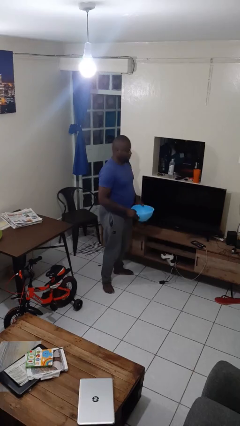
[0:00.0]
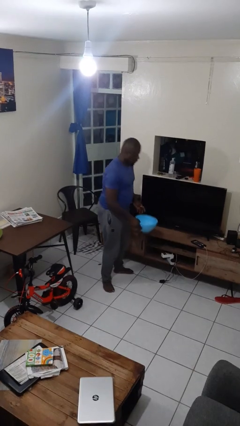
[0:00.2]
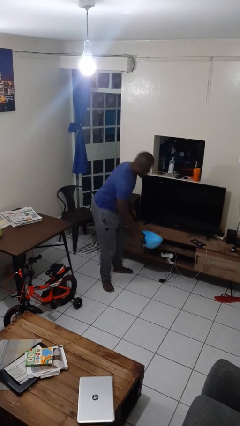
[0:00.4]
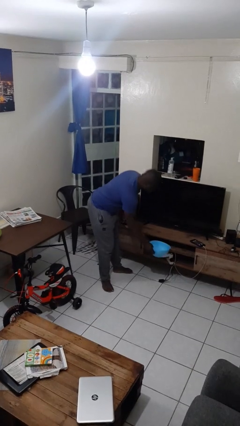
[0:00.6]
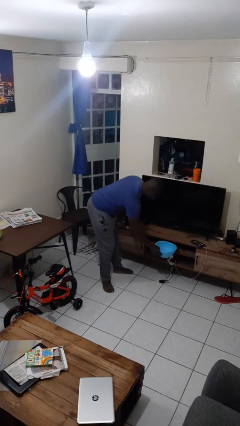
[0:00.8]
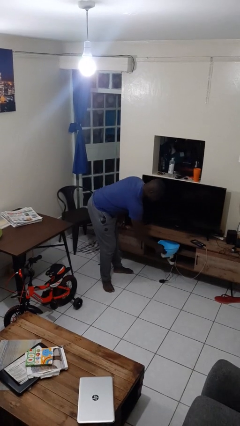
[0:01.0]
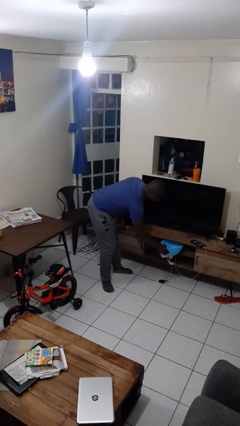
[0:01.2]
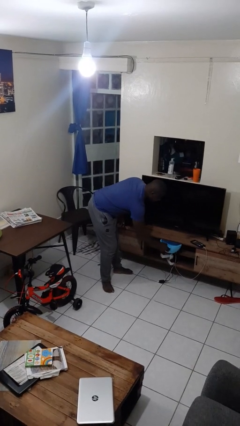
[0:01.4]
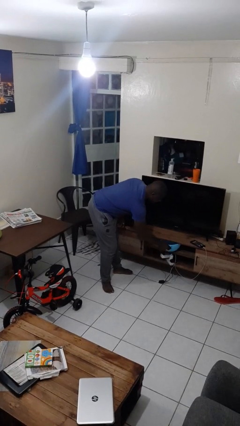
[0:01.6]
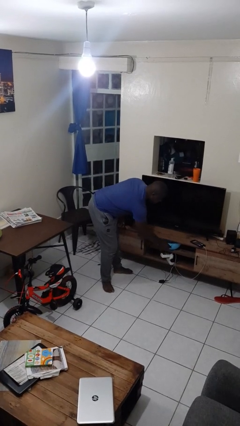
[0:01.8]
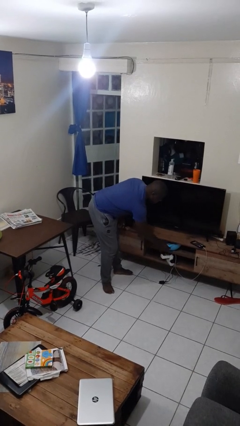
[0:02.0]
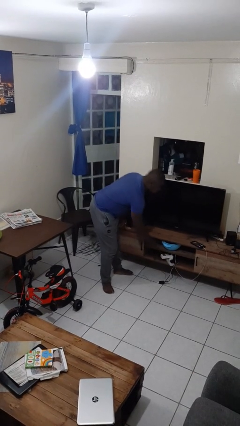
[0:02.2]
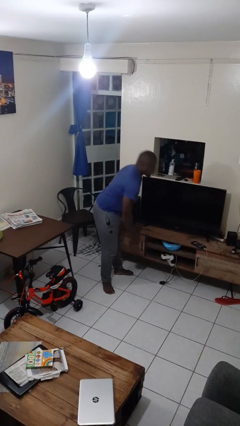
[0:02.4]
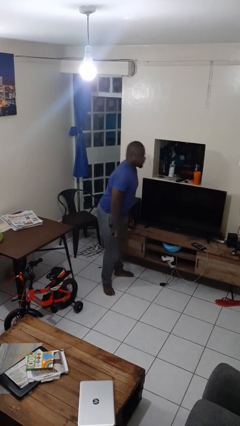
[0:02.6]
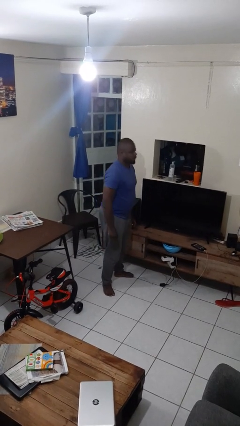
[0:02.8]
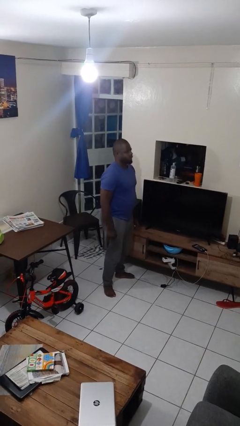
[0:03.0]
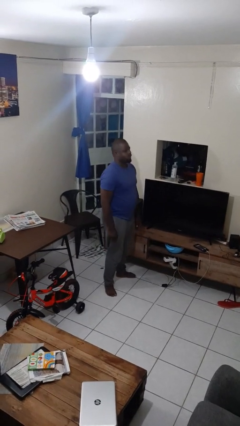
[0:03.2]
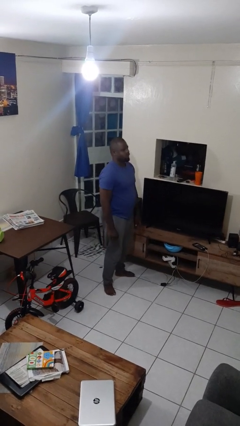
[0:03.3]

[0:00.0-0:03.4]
person puts down object into cabinet

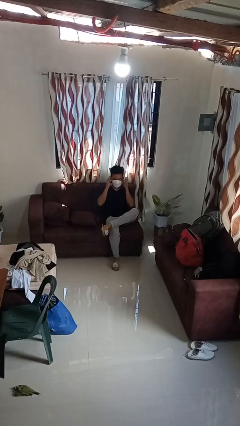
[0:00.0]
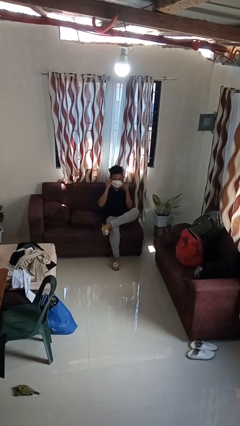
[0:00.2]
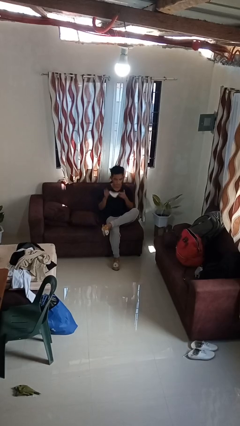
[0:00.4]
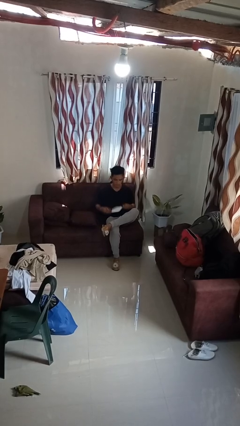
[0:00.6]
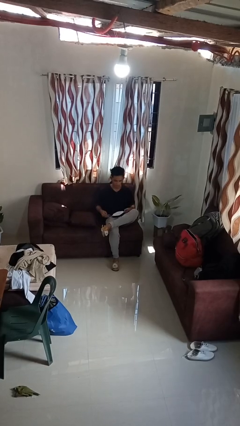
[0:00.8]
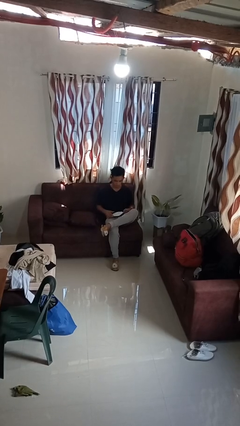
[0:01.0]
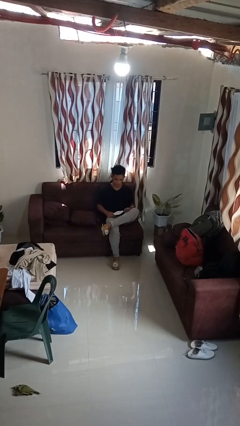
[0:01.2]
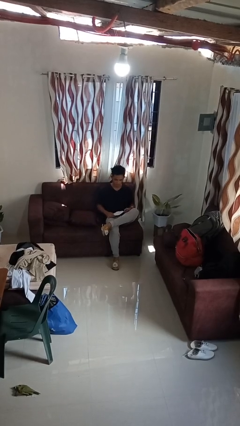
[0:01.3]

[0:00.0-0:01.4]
person takes off facemask

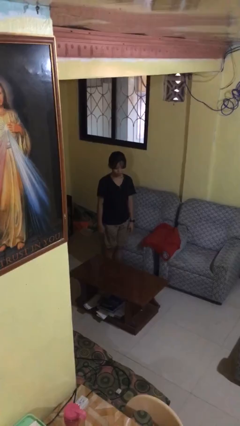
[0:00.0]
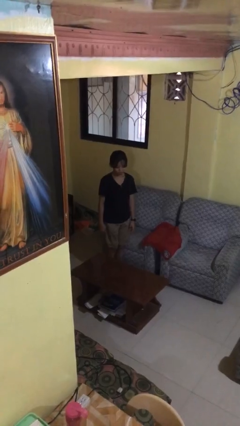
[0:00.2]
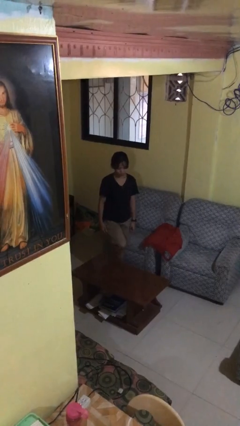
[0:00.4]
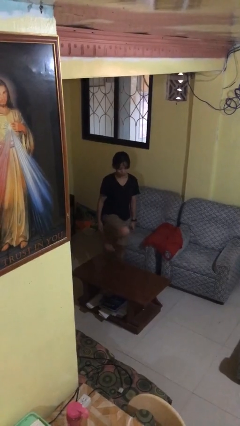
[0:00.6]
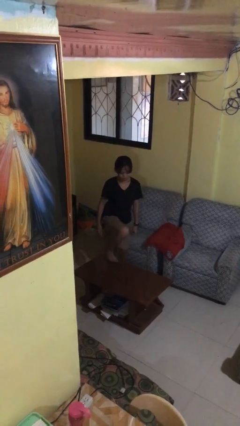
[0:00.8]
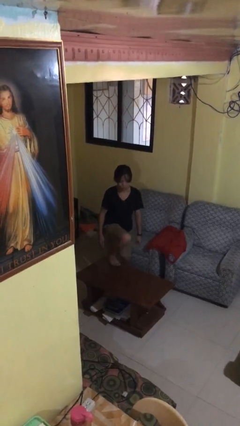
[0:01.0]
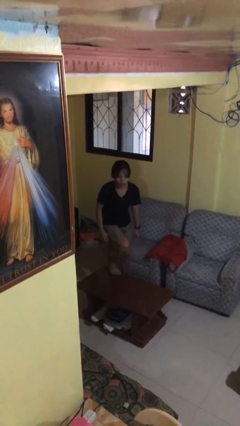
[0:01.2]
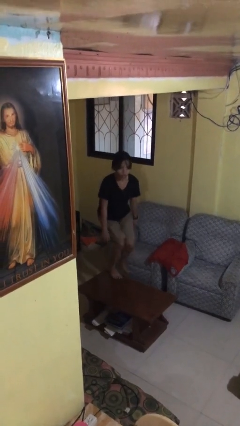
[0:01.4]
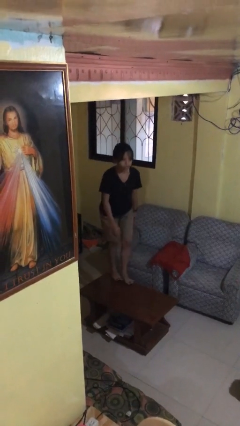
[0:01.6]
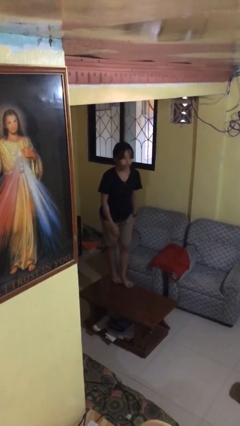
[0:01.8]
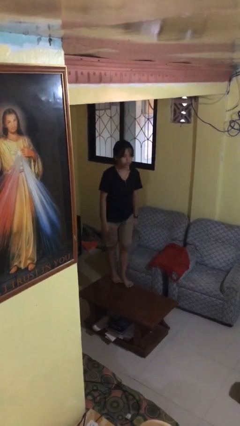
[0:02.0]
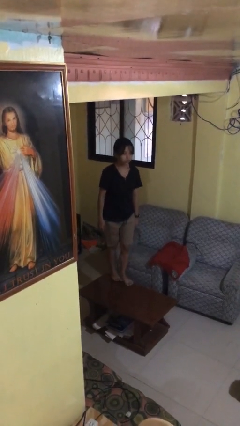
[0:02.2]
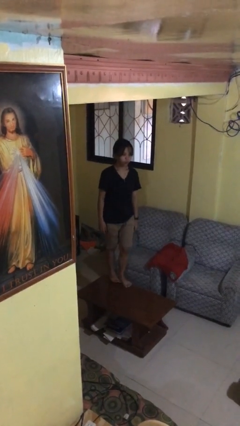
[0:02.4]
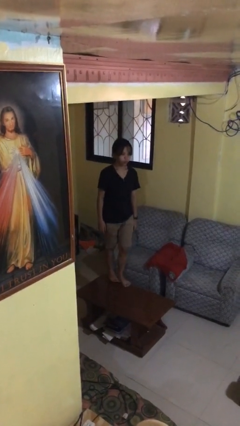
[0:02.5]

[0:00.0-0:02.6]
person climbs on table

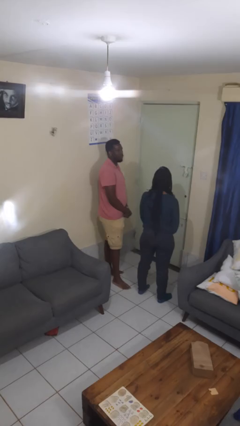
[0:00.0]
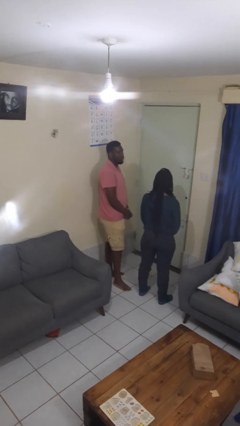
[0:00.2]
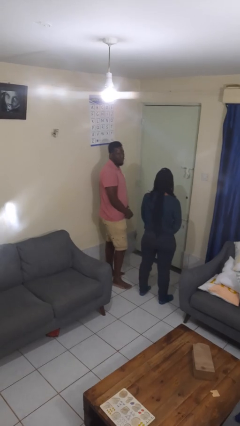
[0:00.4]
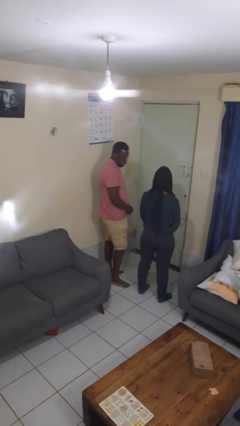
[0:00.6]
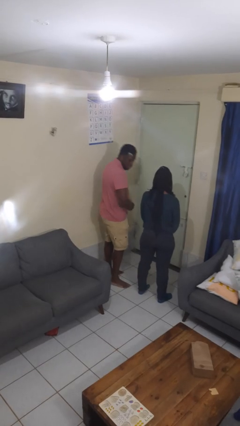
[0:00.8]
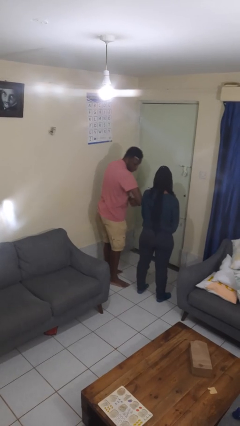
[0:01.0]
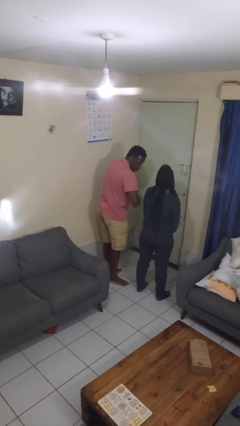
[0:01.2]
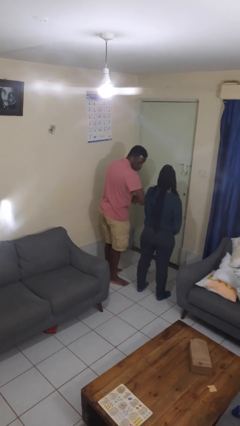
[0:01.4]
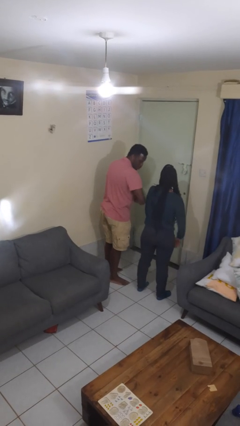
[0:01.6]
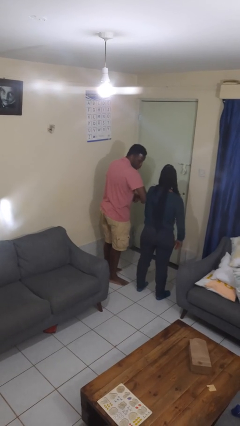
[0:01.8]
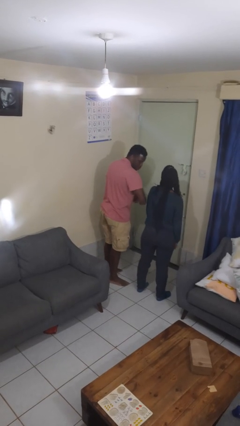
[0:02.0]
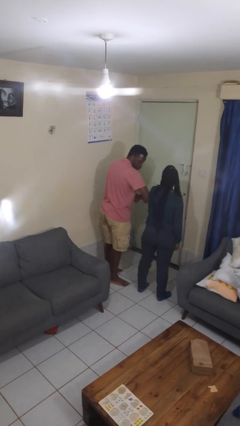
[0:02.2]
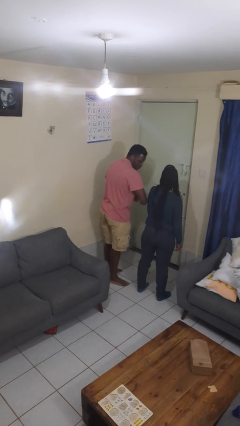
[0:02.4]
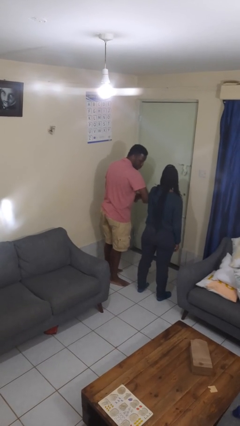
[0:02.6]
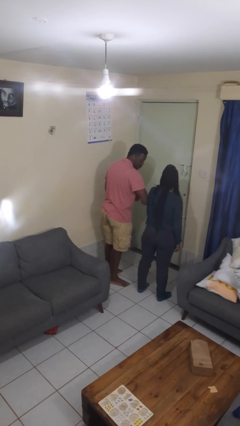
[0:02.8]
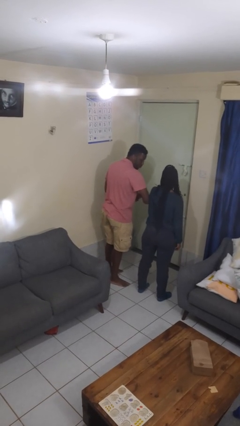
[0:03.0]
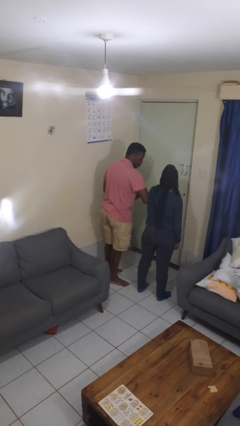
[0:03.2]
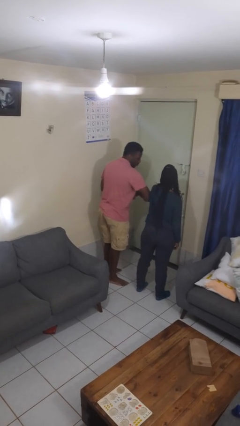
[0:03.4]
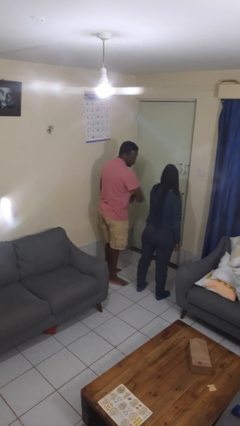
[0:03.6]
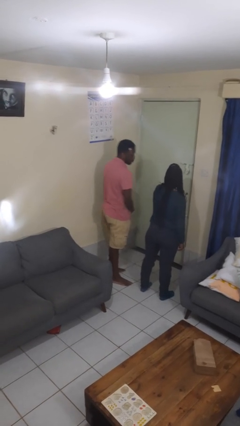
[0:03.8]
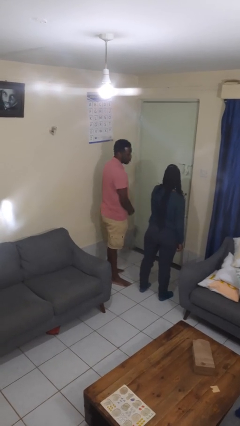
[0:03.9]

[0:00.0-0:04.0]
person nudges person with elbow

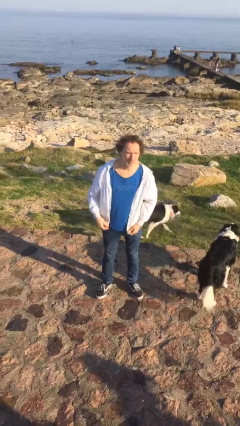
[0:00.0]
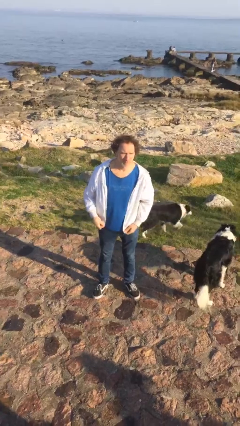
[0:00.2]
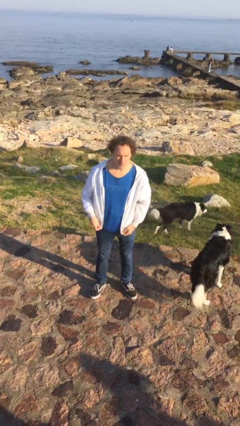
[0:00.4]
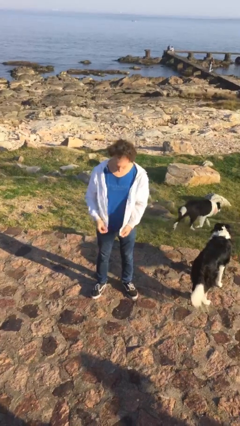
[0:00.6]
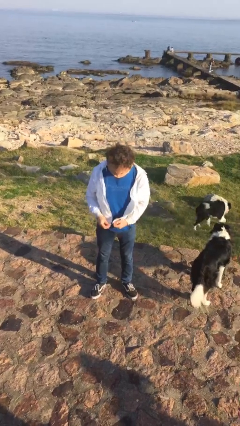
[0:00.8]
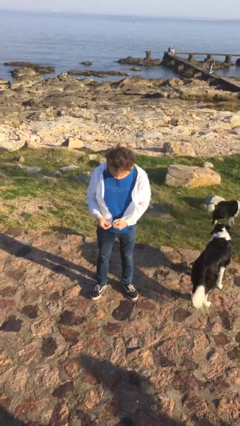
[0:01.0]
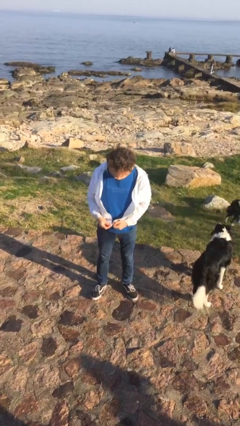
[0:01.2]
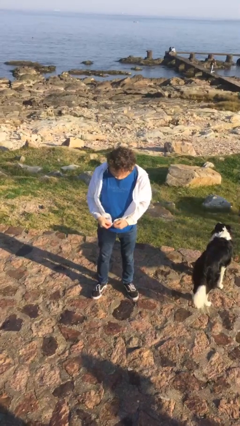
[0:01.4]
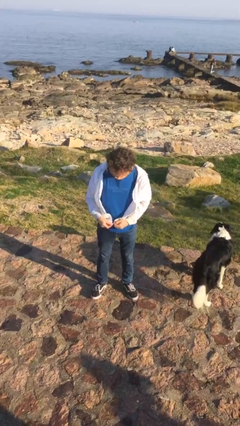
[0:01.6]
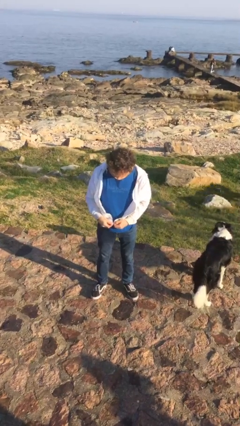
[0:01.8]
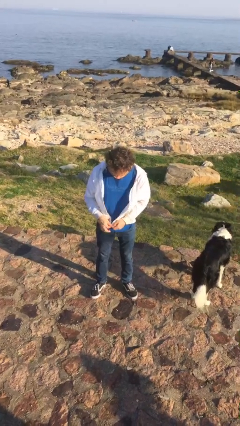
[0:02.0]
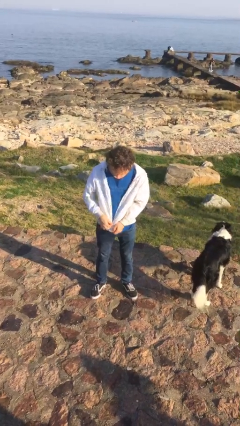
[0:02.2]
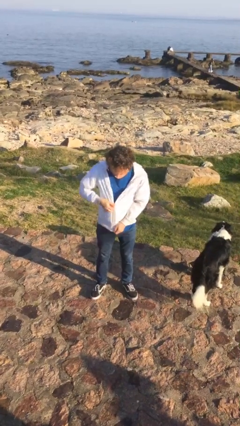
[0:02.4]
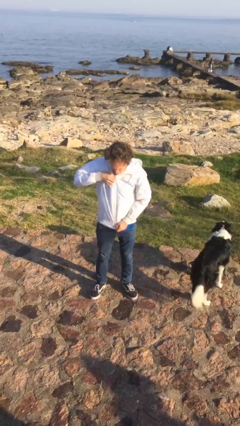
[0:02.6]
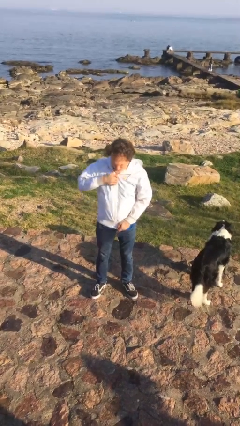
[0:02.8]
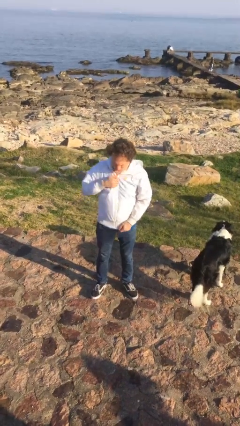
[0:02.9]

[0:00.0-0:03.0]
person zips up jacket

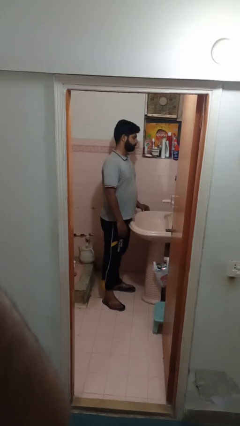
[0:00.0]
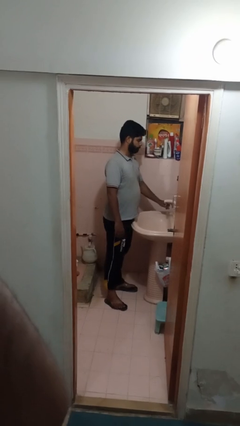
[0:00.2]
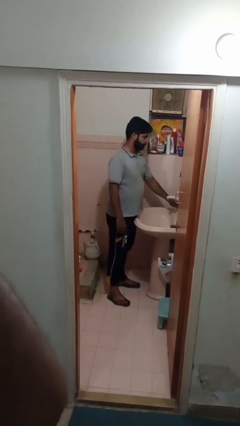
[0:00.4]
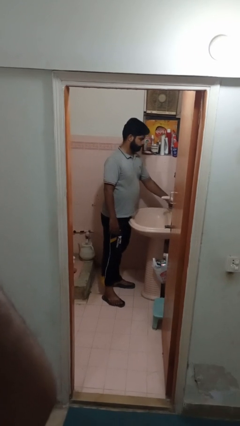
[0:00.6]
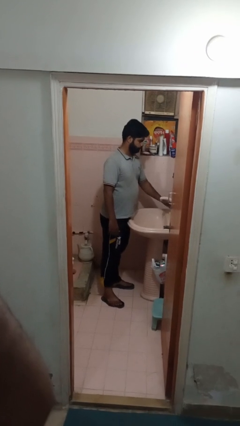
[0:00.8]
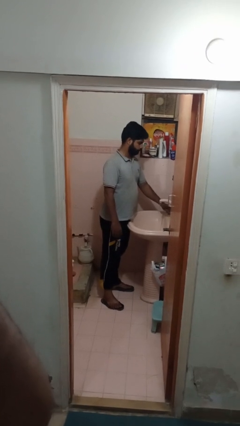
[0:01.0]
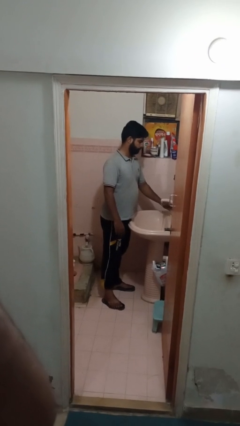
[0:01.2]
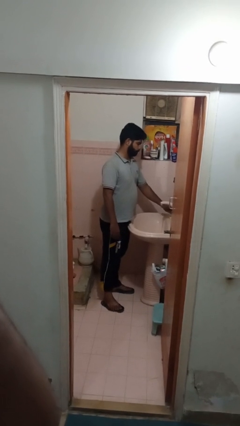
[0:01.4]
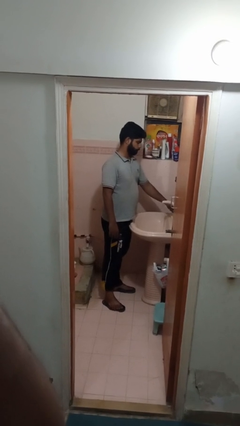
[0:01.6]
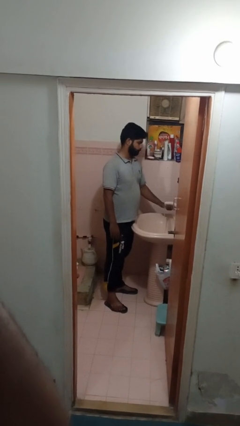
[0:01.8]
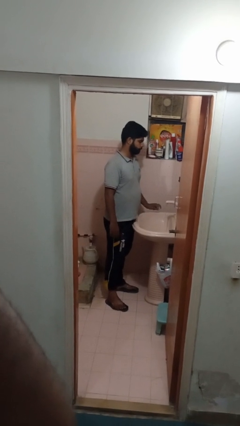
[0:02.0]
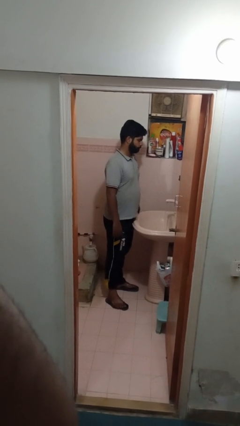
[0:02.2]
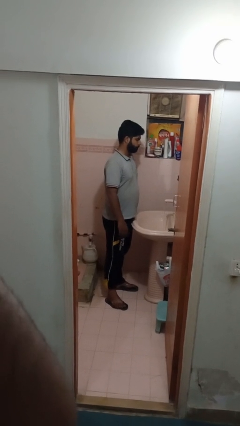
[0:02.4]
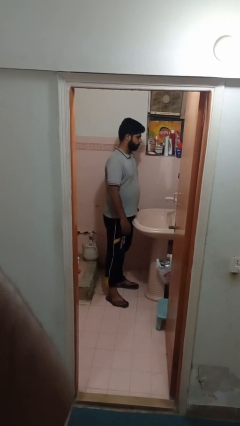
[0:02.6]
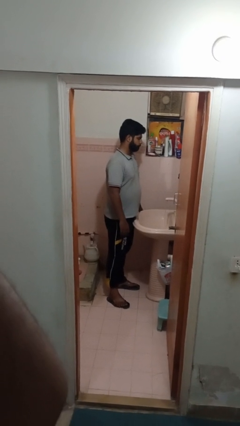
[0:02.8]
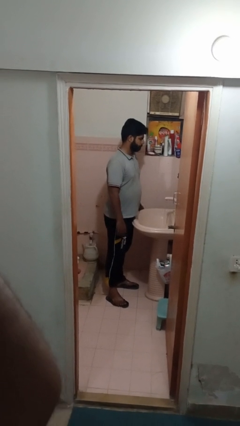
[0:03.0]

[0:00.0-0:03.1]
person turns on faucet
